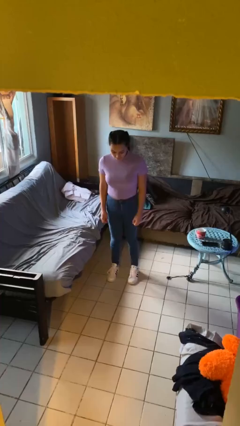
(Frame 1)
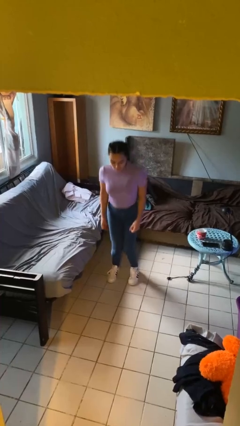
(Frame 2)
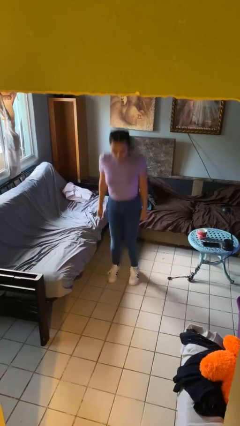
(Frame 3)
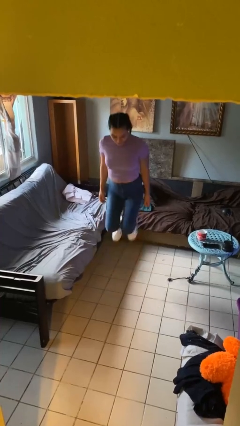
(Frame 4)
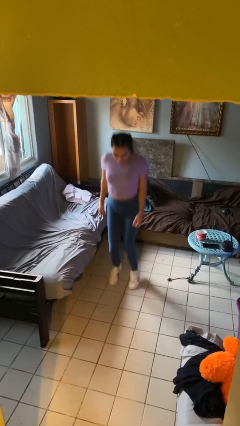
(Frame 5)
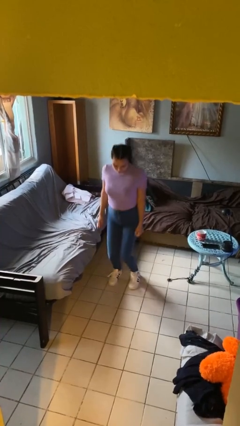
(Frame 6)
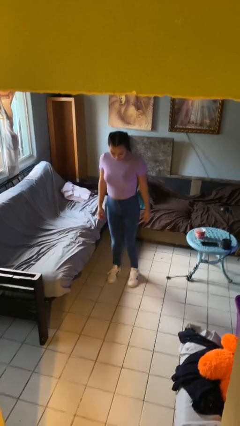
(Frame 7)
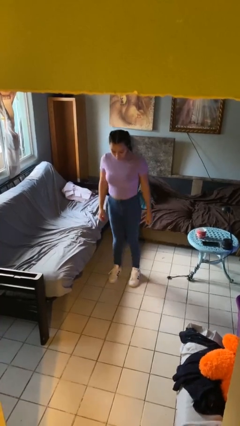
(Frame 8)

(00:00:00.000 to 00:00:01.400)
person jumps

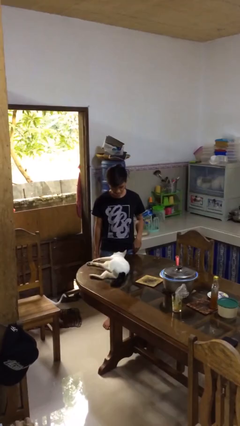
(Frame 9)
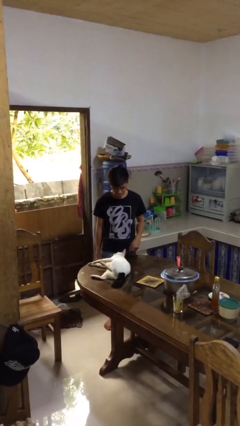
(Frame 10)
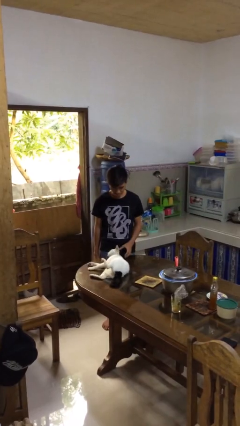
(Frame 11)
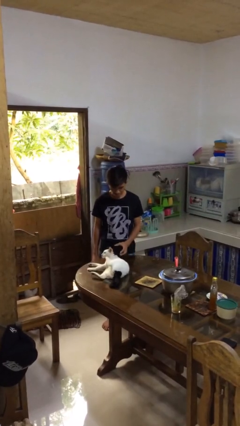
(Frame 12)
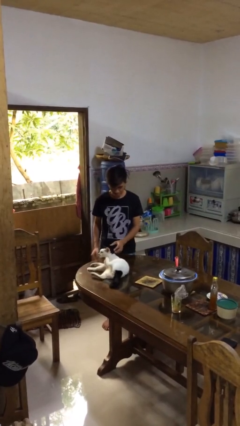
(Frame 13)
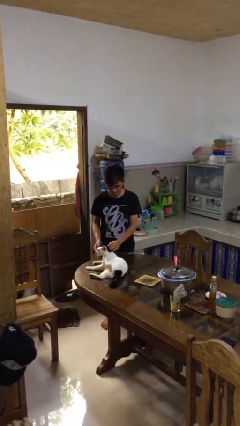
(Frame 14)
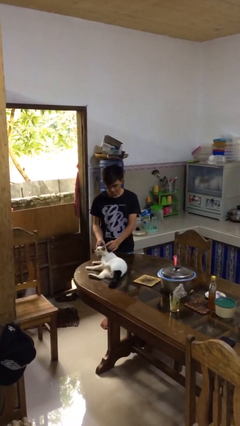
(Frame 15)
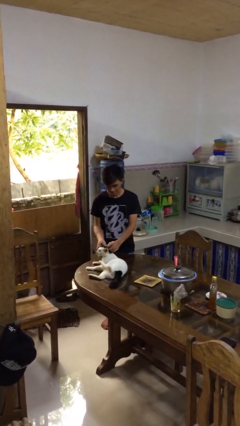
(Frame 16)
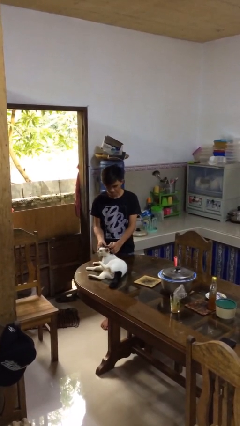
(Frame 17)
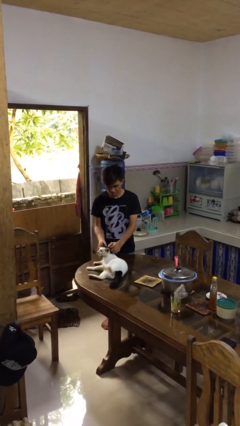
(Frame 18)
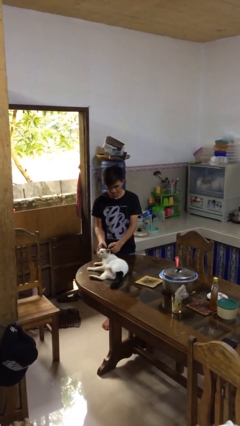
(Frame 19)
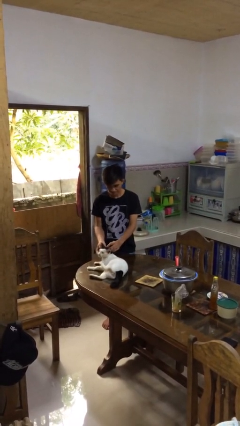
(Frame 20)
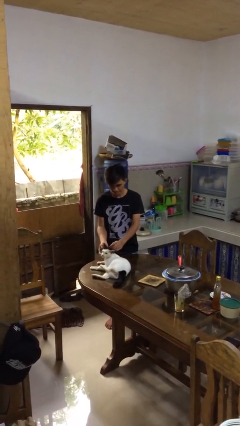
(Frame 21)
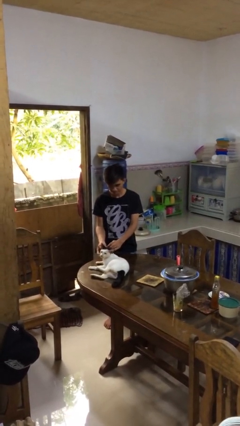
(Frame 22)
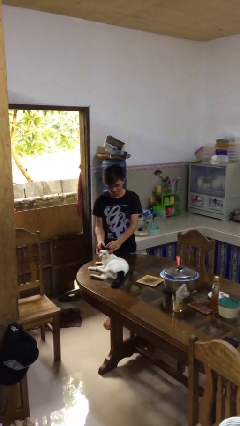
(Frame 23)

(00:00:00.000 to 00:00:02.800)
person pets cat

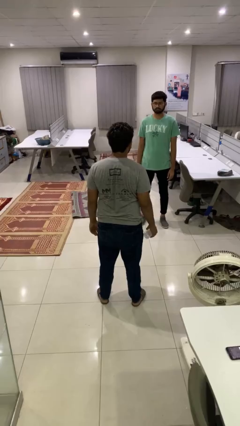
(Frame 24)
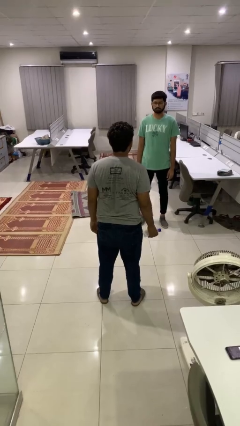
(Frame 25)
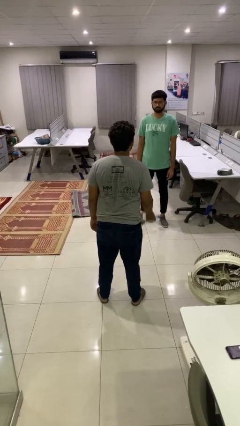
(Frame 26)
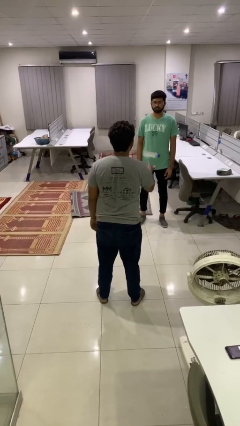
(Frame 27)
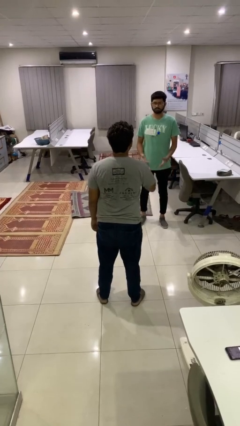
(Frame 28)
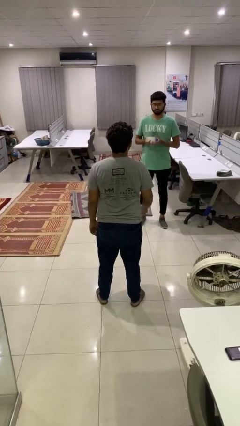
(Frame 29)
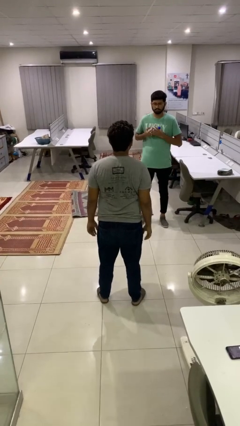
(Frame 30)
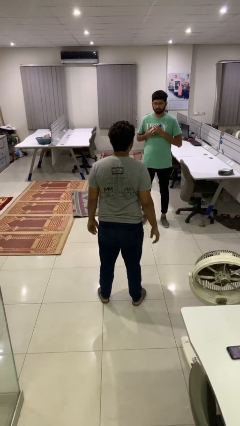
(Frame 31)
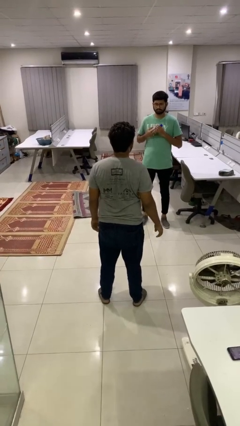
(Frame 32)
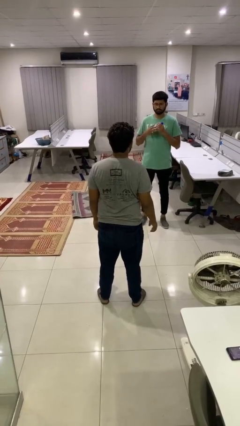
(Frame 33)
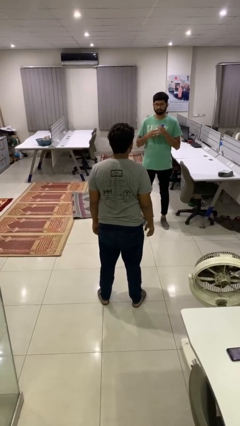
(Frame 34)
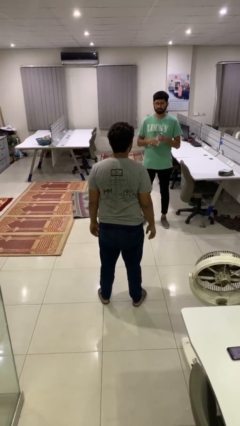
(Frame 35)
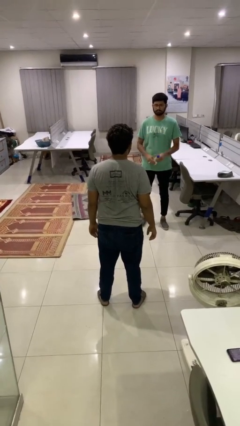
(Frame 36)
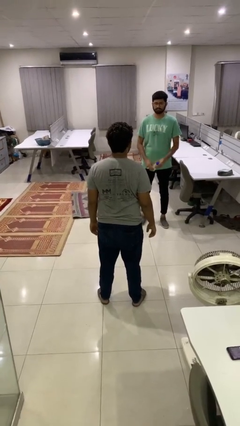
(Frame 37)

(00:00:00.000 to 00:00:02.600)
person throws object to person

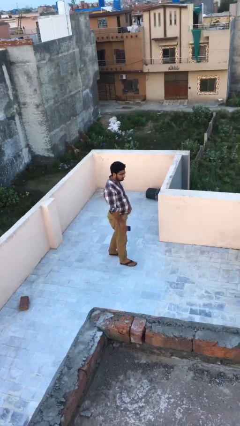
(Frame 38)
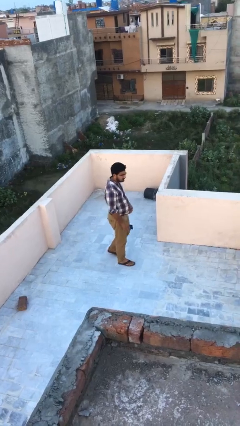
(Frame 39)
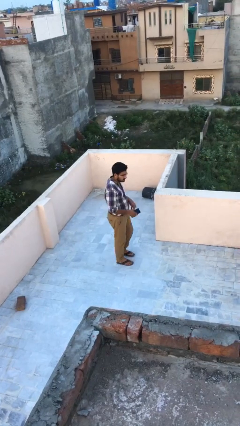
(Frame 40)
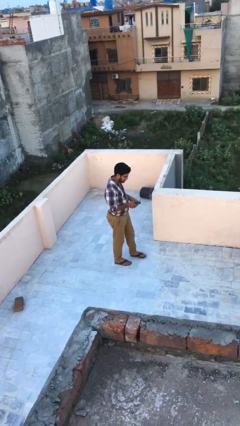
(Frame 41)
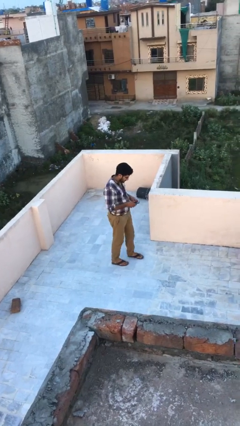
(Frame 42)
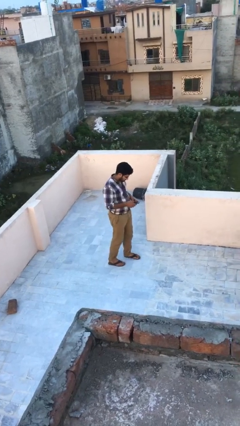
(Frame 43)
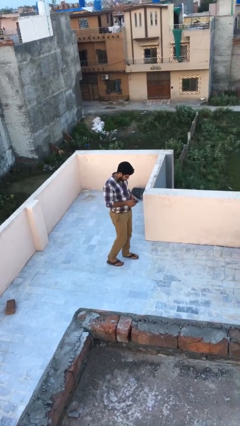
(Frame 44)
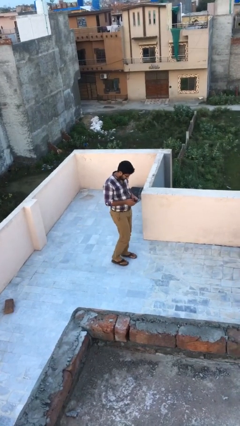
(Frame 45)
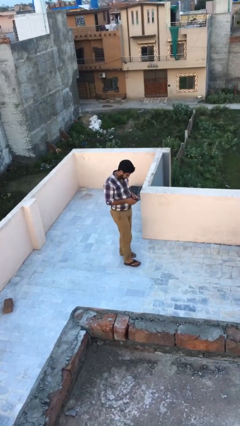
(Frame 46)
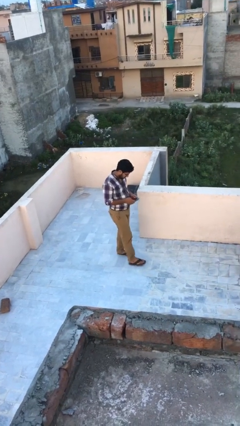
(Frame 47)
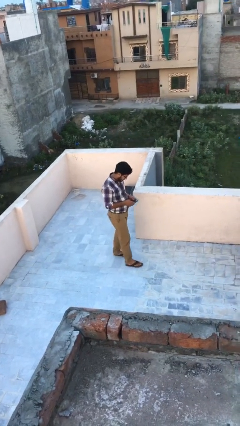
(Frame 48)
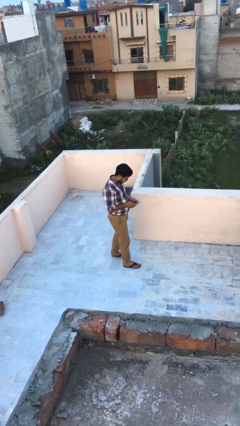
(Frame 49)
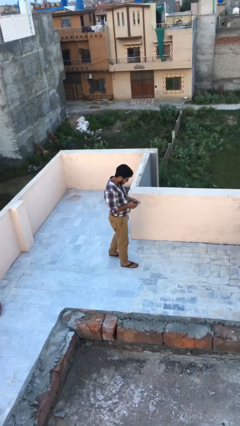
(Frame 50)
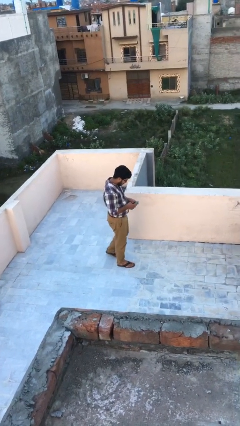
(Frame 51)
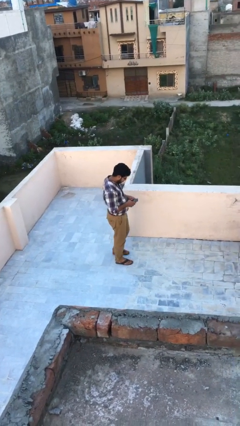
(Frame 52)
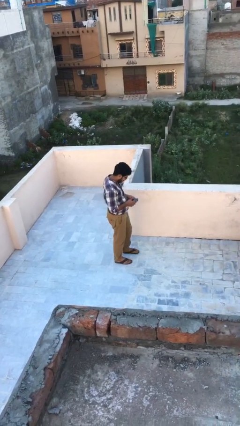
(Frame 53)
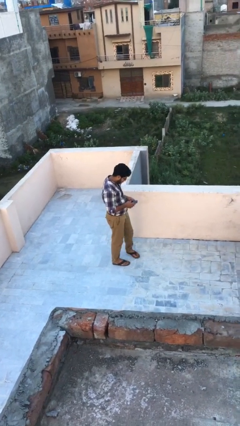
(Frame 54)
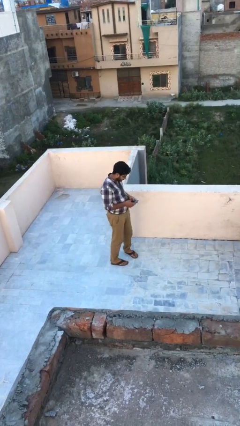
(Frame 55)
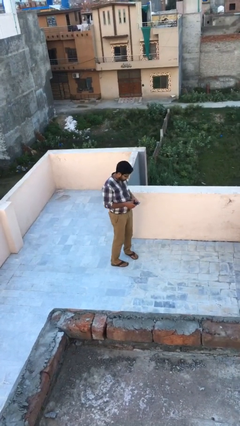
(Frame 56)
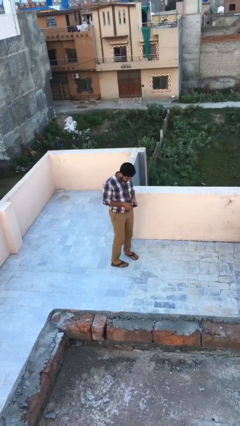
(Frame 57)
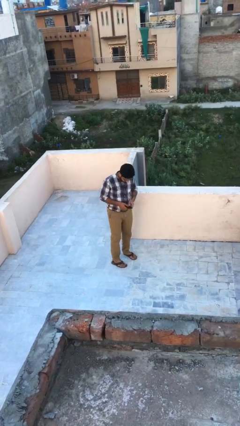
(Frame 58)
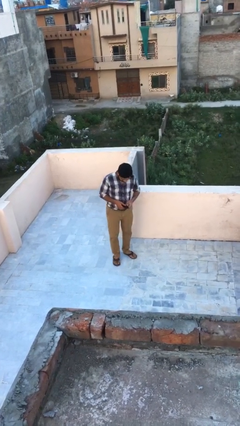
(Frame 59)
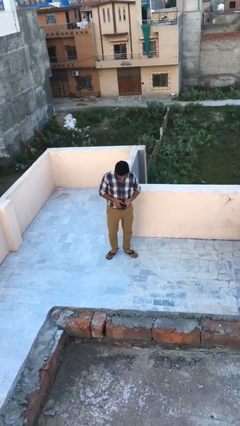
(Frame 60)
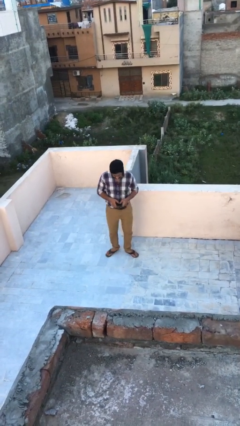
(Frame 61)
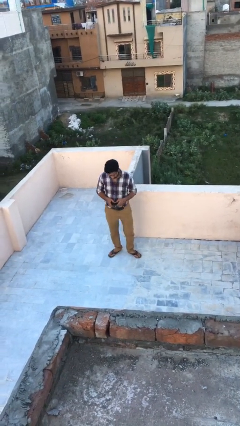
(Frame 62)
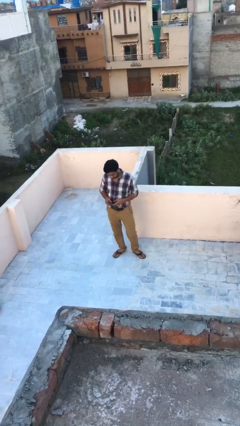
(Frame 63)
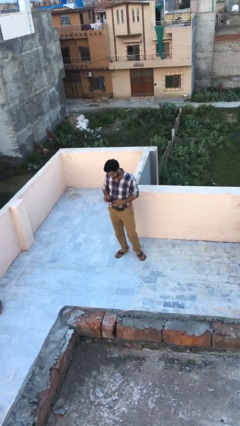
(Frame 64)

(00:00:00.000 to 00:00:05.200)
person texts on phone

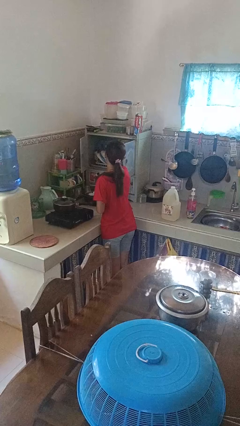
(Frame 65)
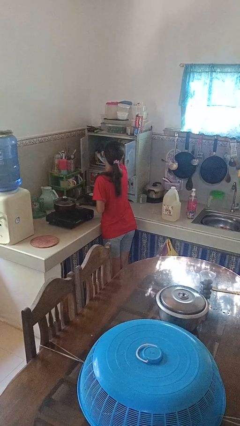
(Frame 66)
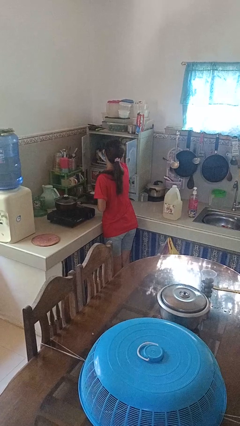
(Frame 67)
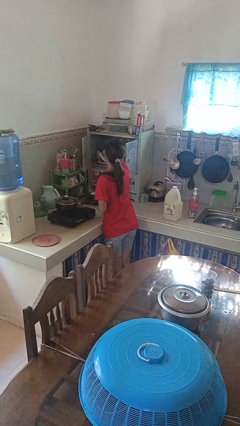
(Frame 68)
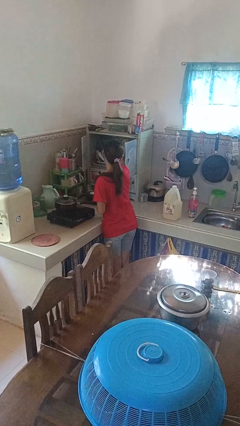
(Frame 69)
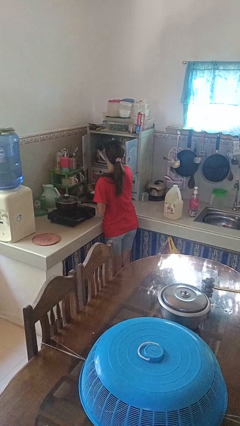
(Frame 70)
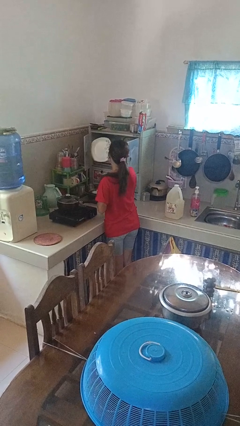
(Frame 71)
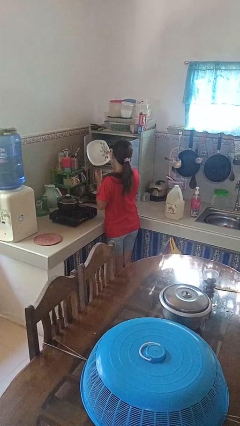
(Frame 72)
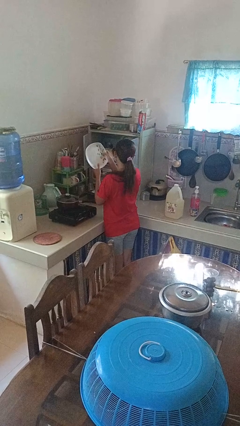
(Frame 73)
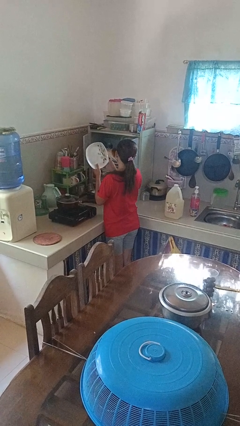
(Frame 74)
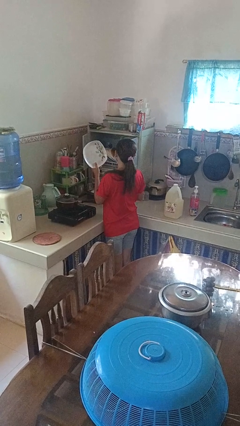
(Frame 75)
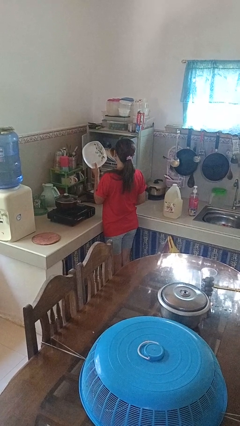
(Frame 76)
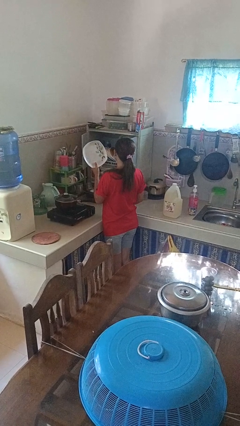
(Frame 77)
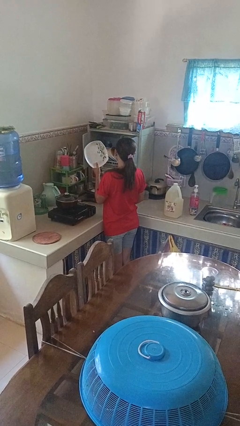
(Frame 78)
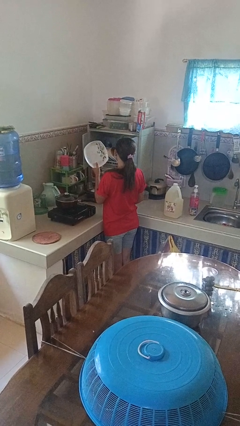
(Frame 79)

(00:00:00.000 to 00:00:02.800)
person takes object from cabinet

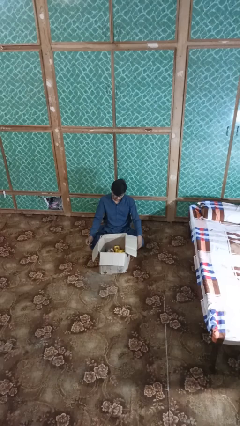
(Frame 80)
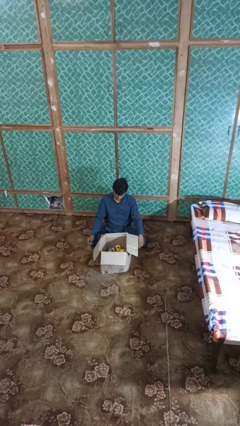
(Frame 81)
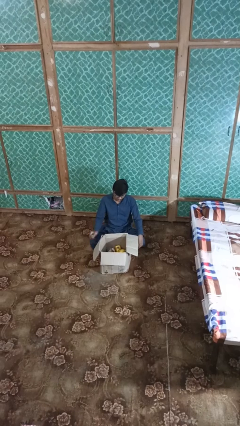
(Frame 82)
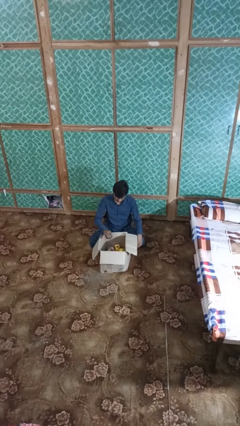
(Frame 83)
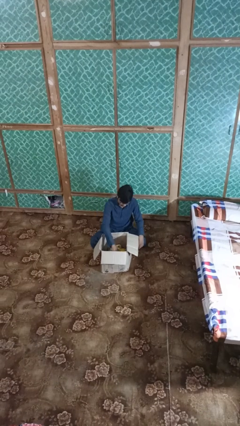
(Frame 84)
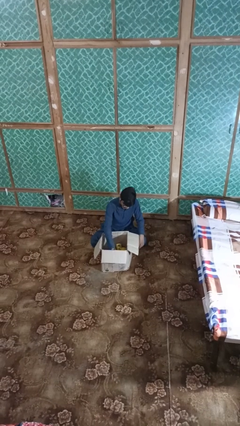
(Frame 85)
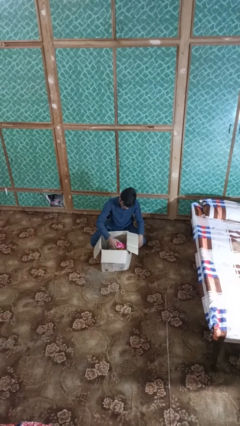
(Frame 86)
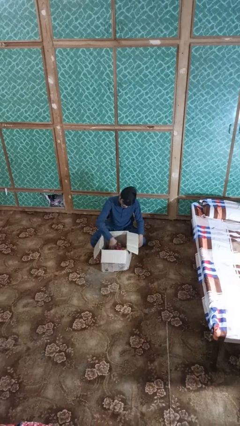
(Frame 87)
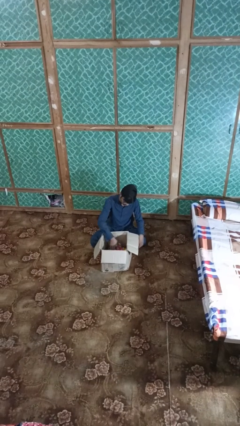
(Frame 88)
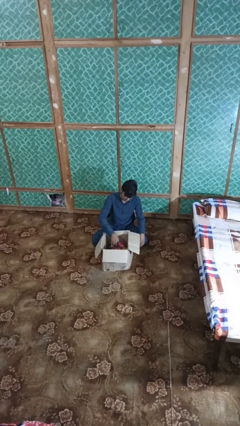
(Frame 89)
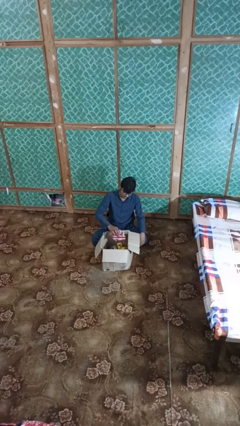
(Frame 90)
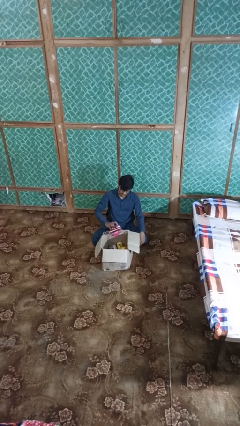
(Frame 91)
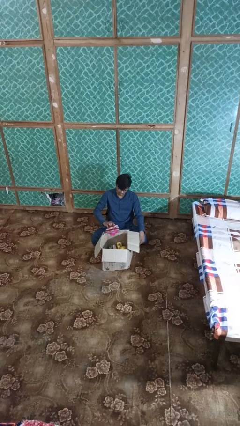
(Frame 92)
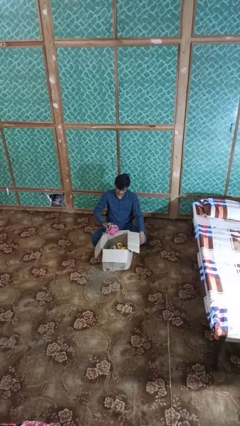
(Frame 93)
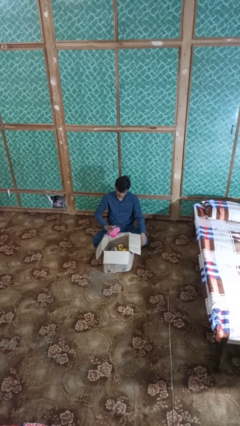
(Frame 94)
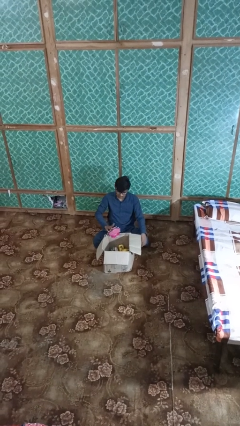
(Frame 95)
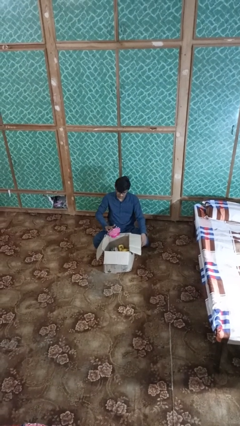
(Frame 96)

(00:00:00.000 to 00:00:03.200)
person takes object from box
